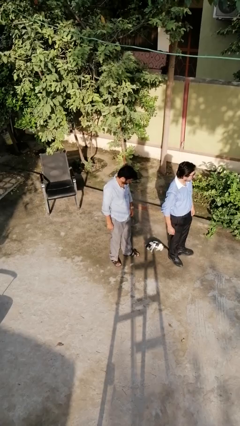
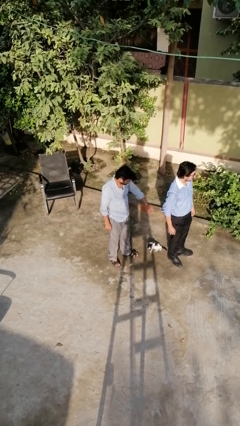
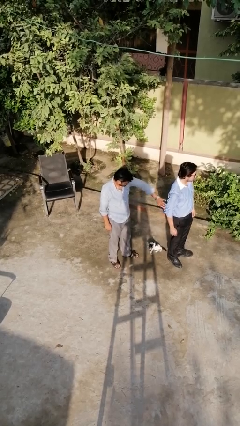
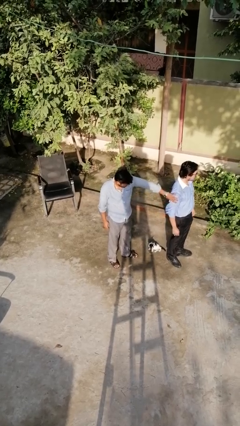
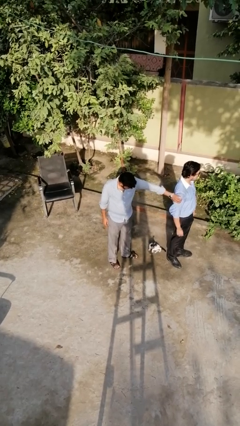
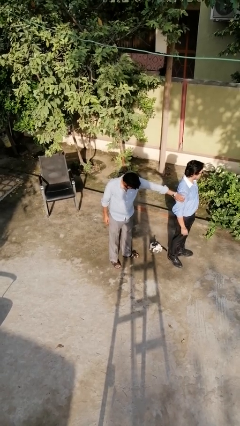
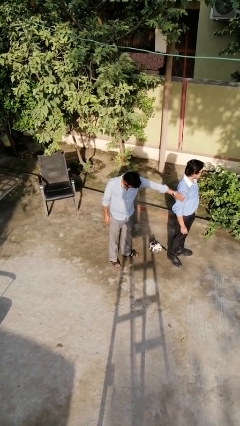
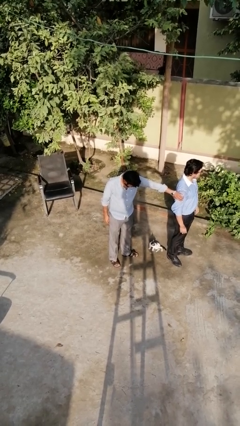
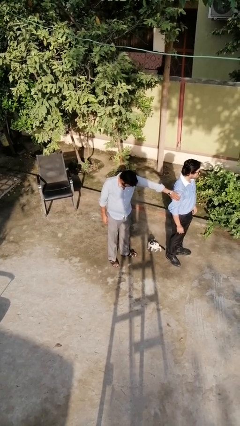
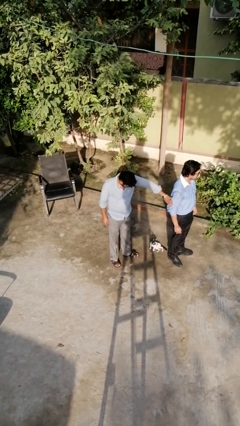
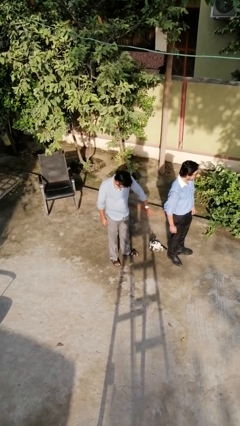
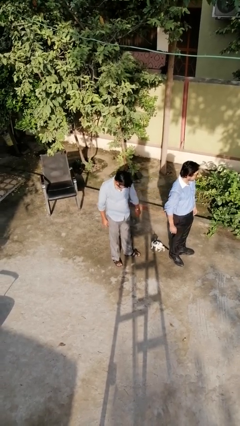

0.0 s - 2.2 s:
person grabs person by bicep

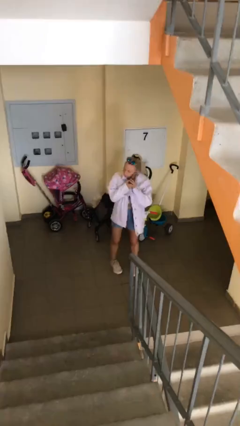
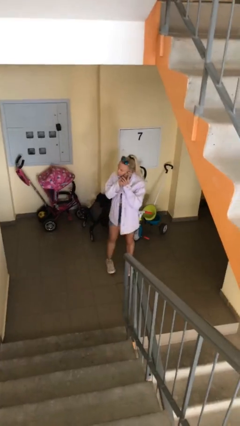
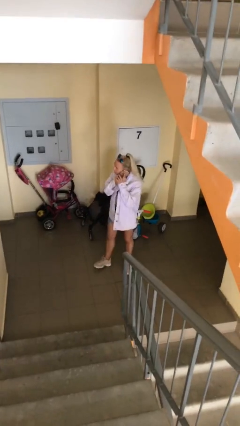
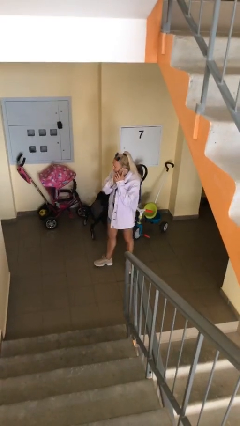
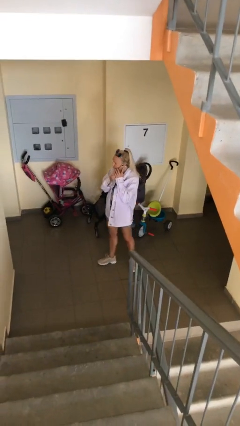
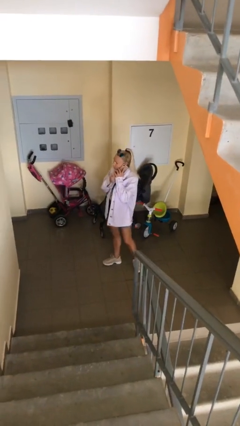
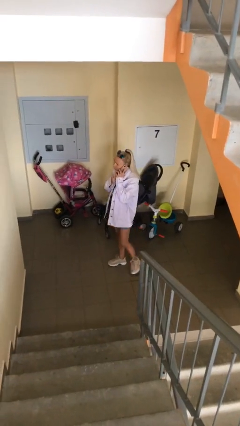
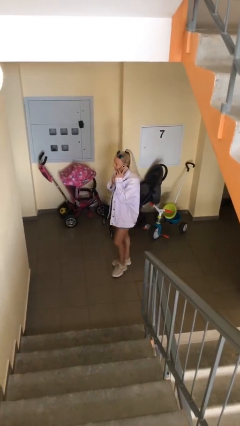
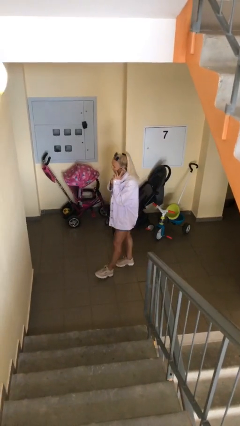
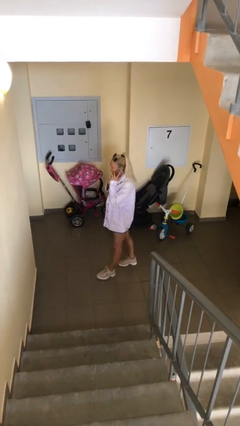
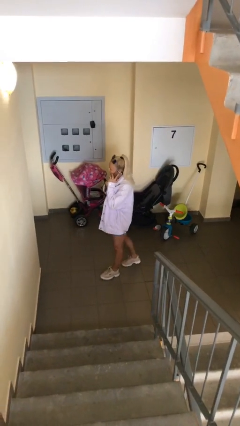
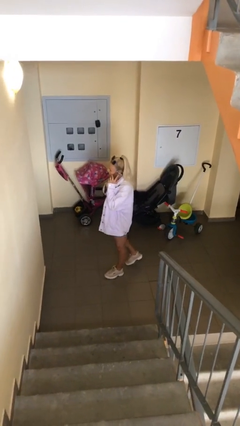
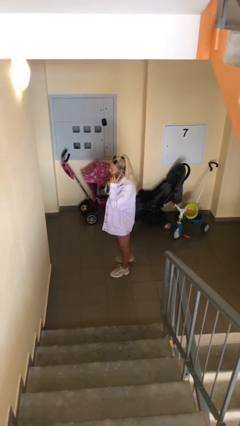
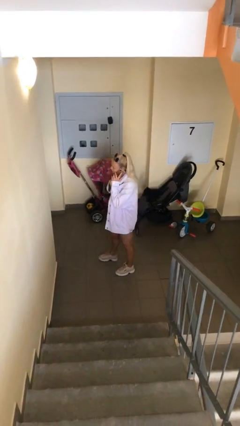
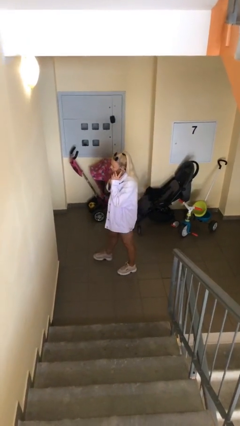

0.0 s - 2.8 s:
person talks on phone

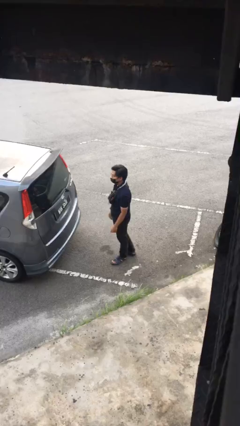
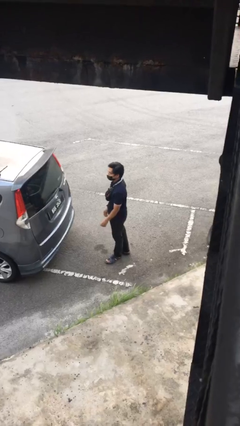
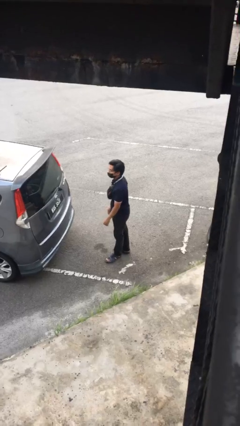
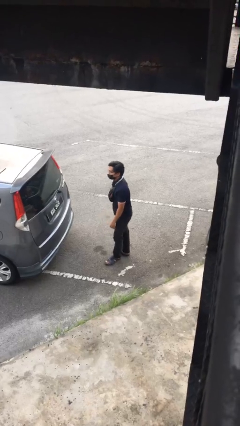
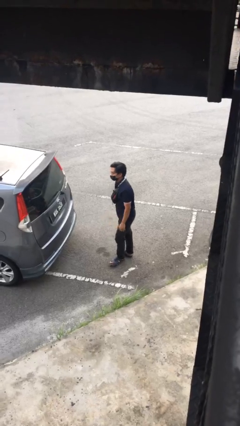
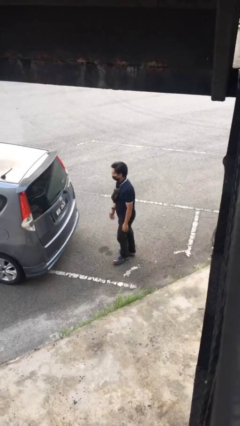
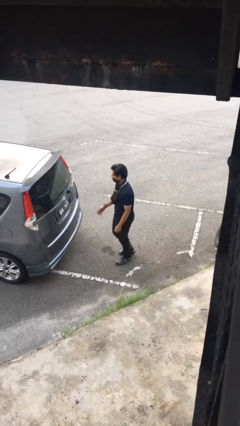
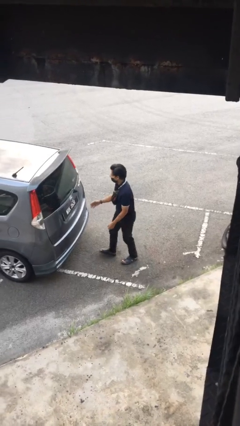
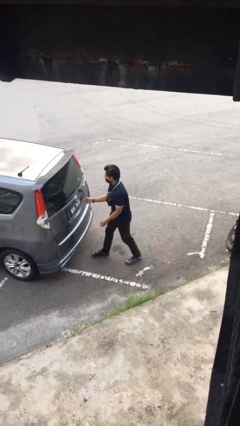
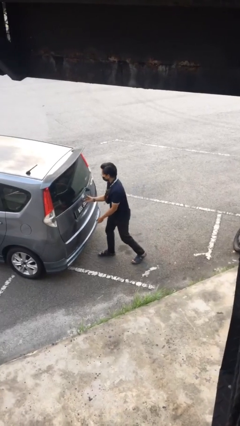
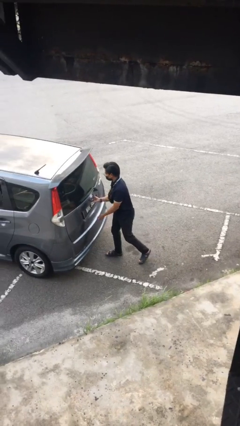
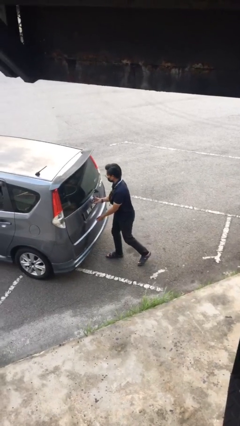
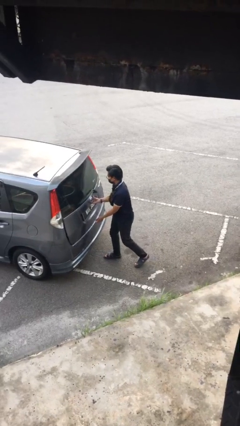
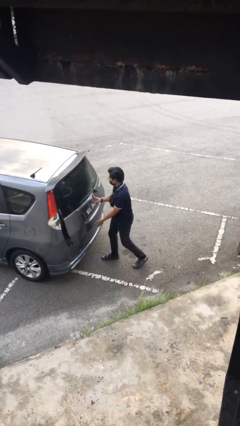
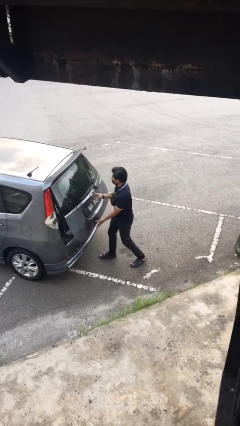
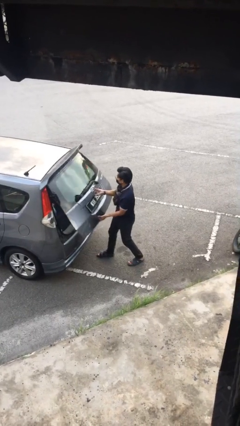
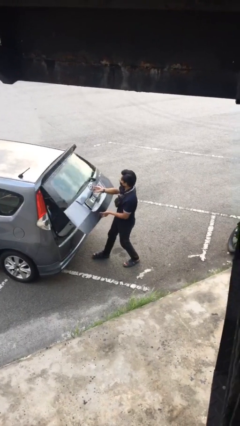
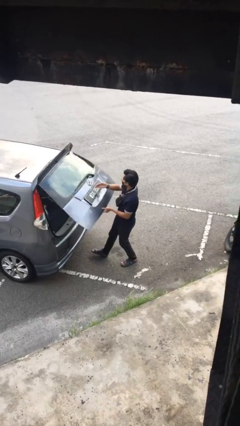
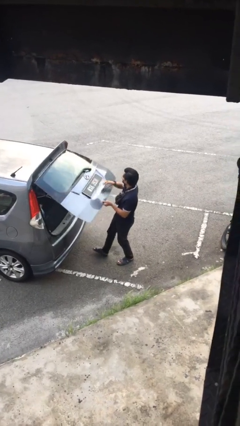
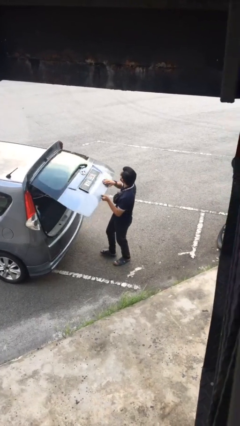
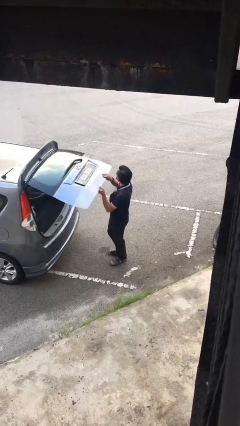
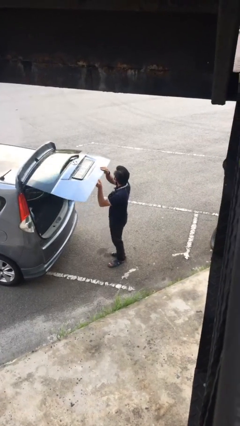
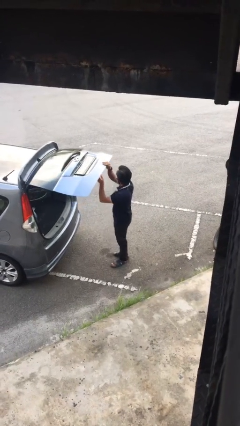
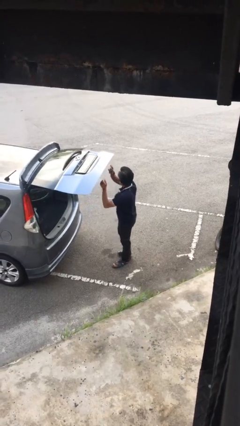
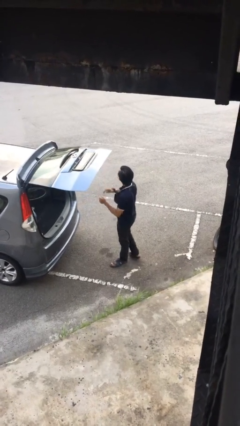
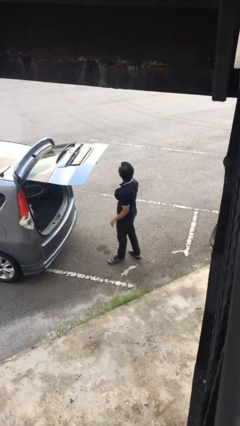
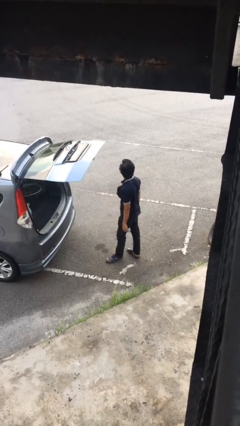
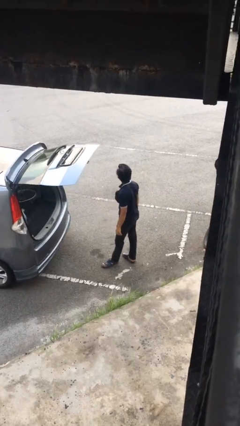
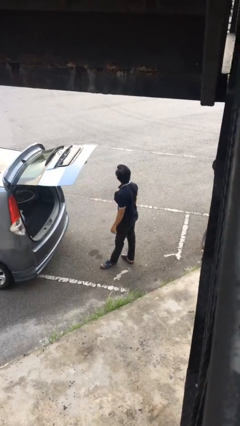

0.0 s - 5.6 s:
person opens car trunk

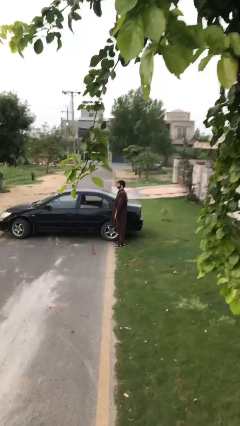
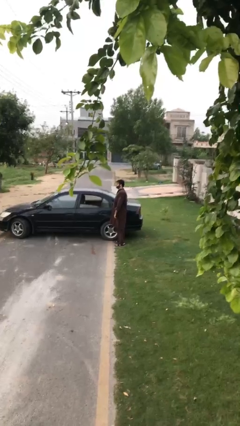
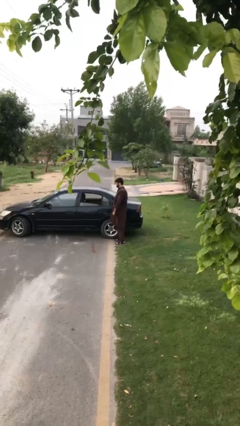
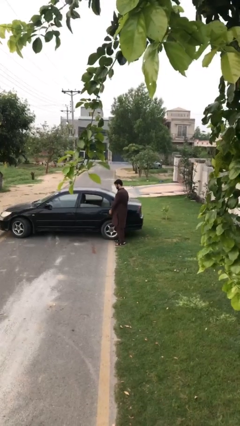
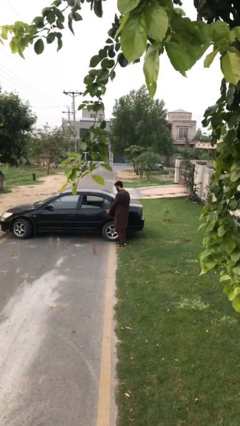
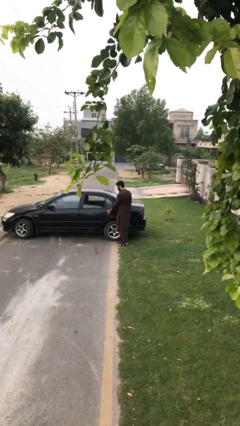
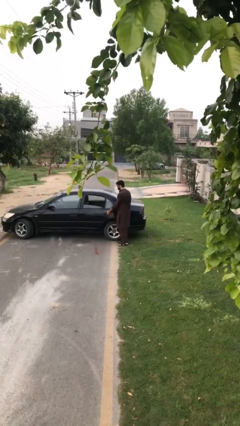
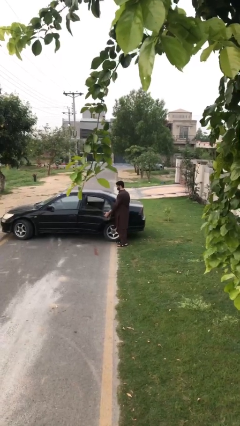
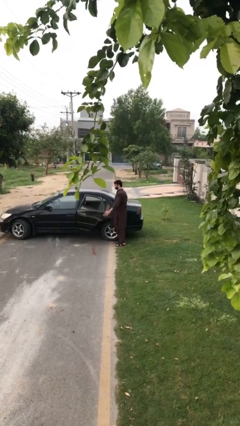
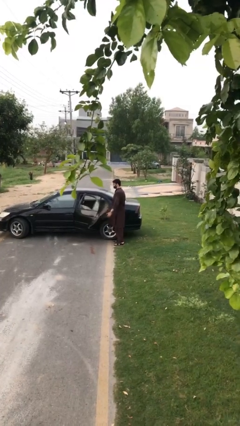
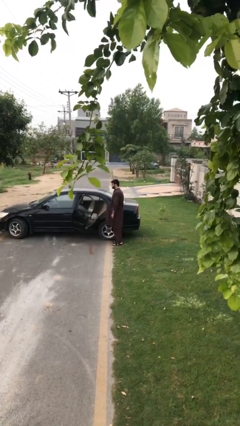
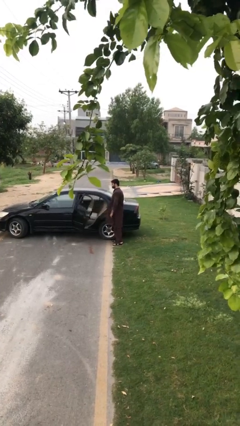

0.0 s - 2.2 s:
person opens car door

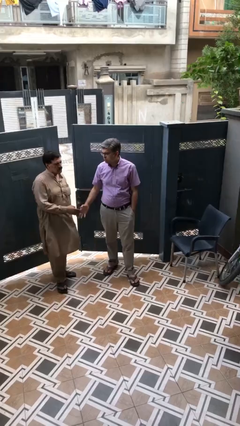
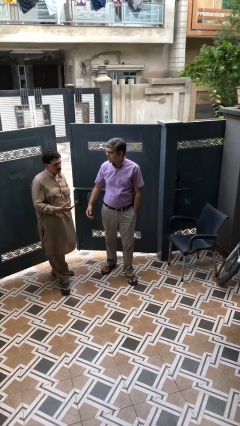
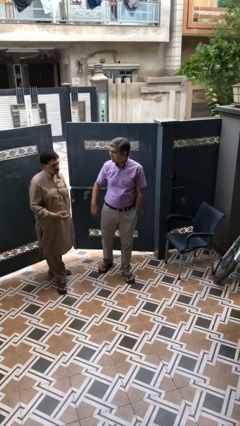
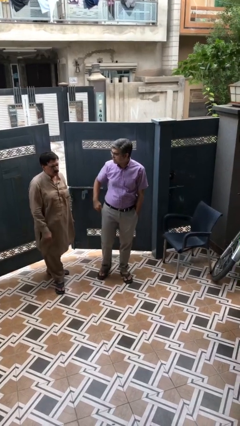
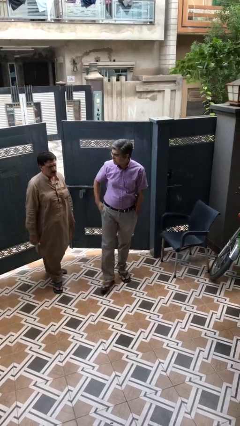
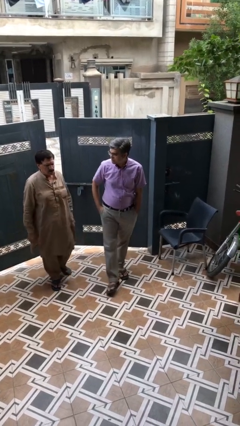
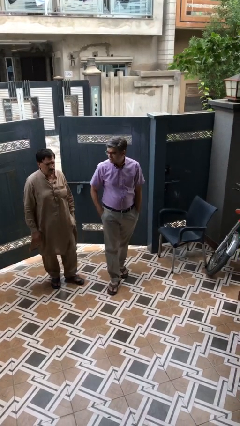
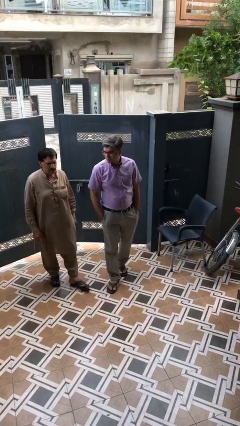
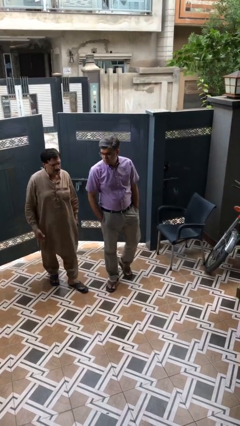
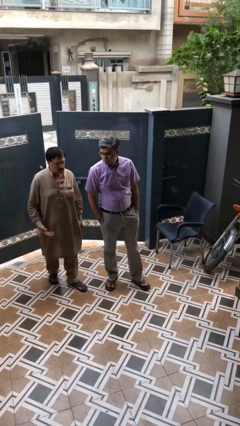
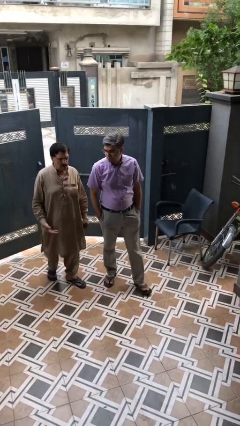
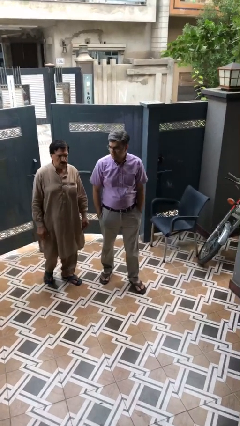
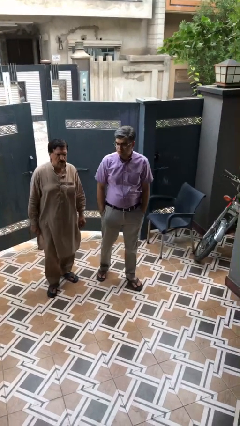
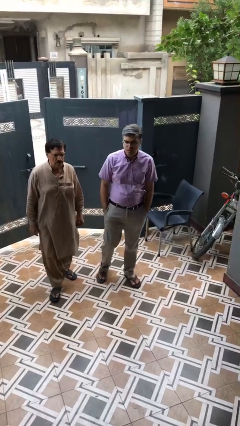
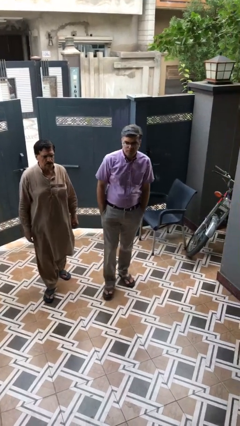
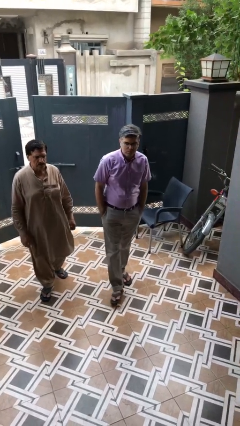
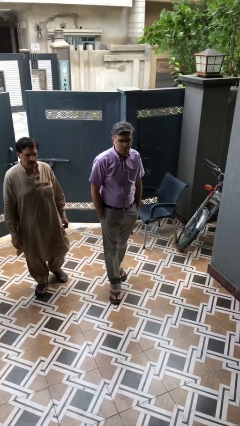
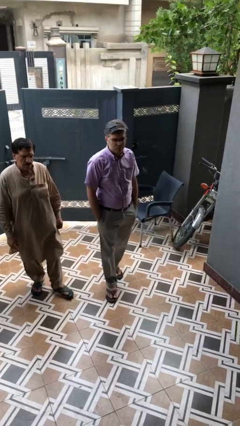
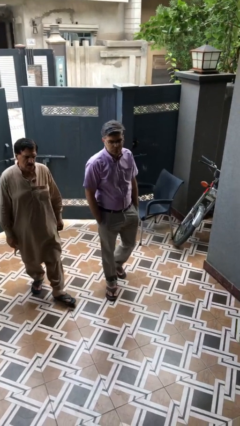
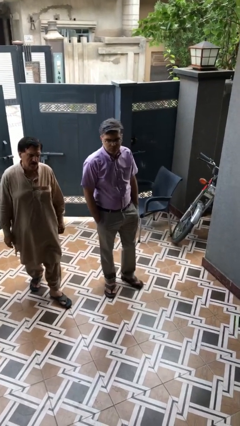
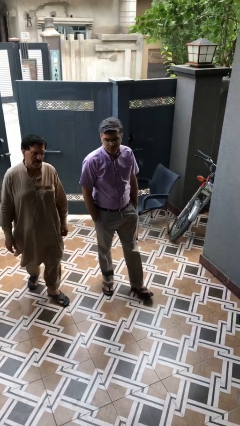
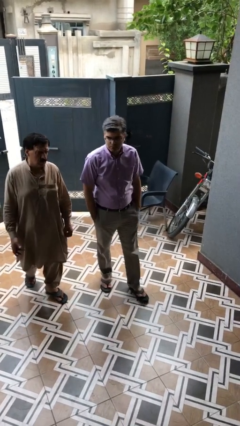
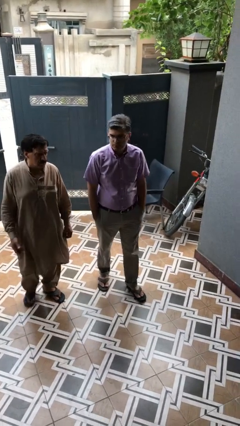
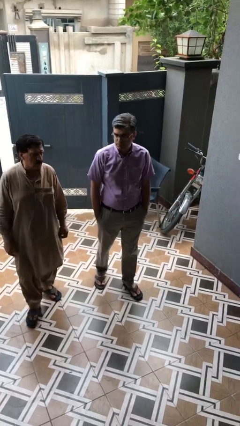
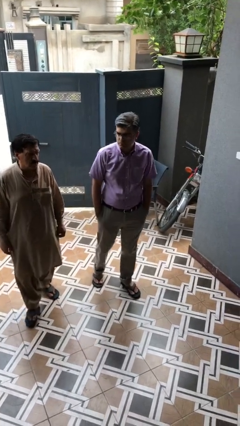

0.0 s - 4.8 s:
person talks to person
